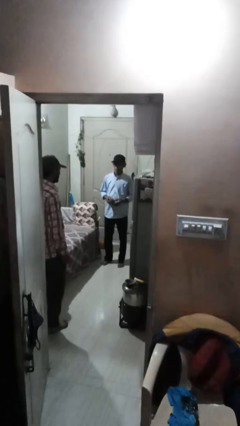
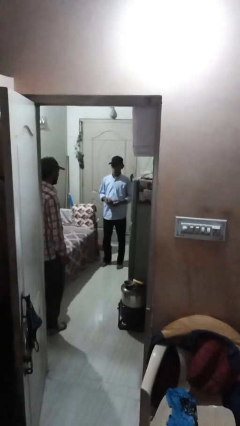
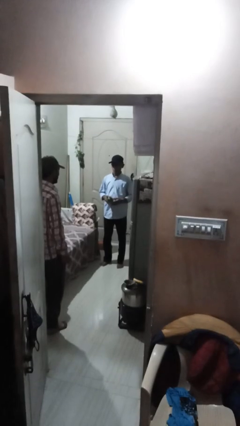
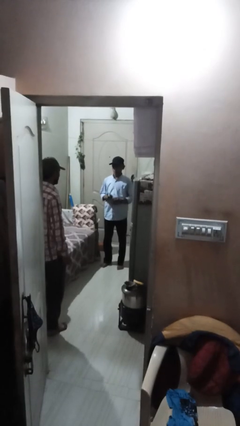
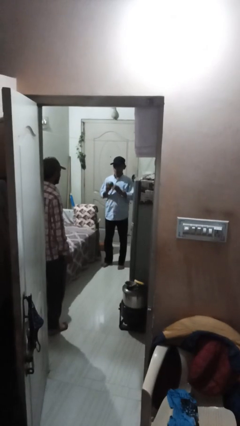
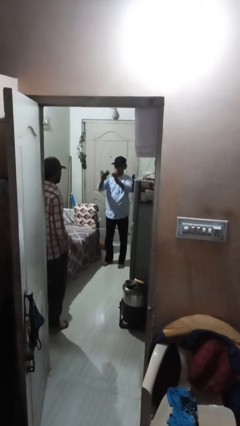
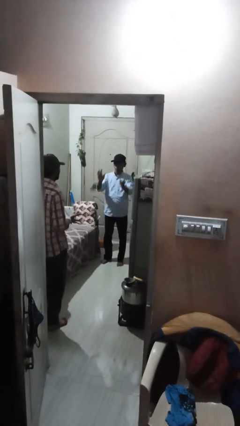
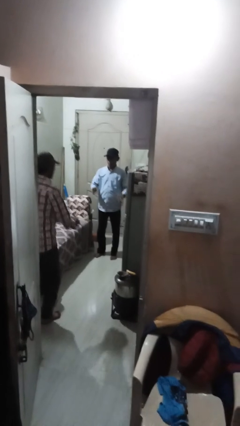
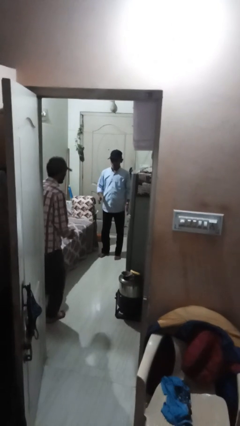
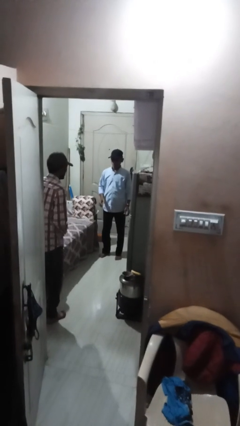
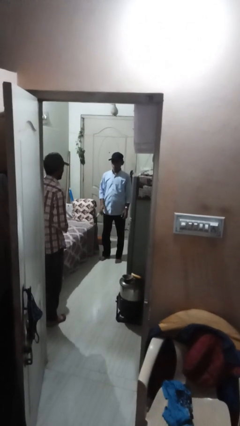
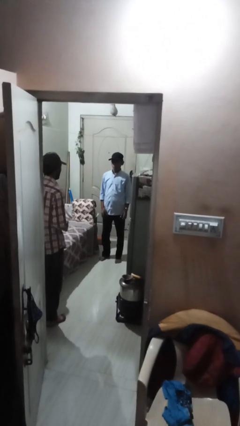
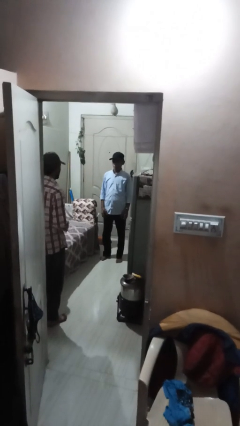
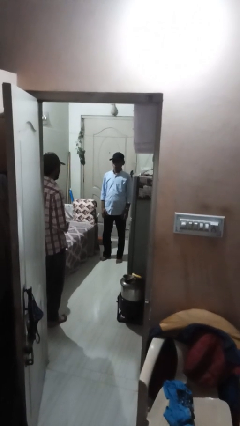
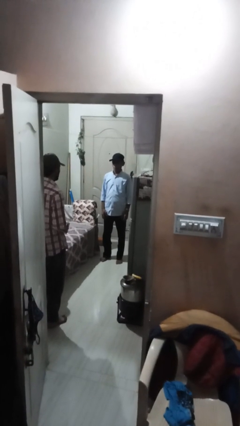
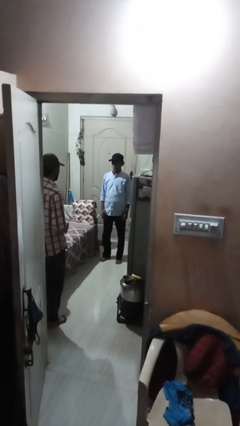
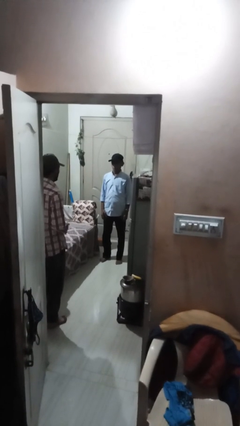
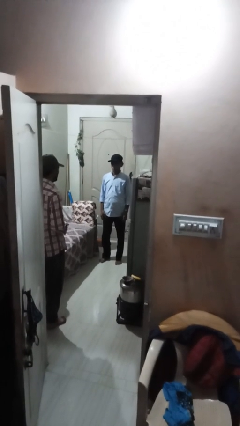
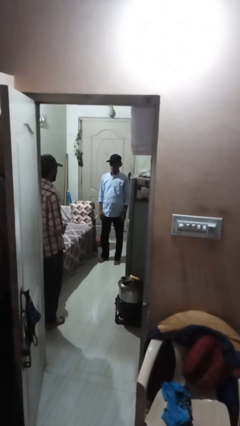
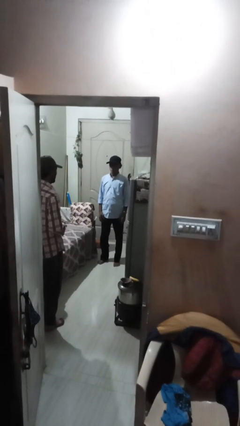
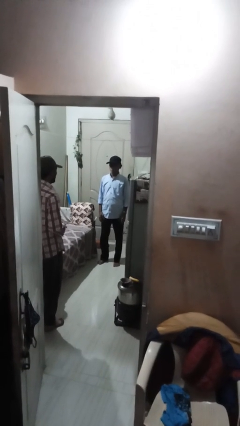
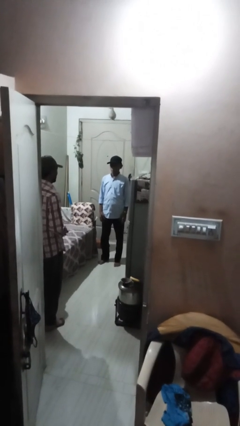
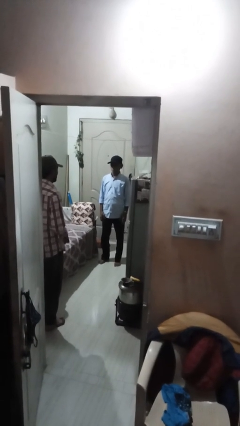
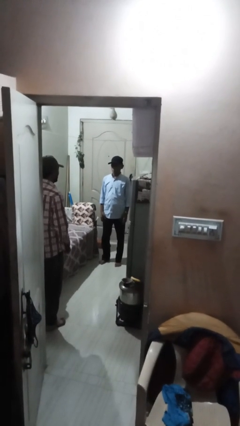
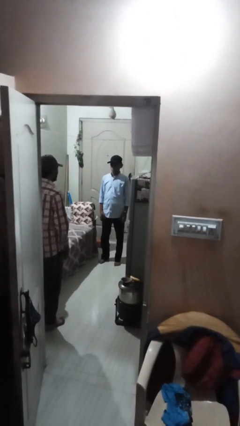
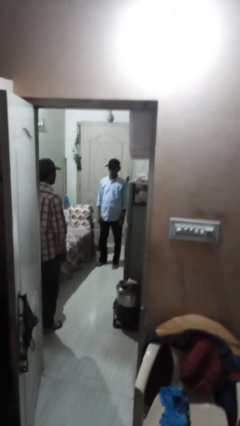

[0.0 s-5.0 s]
person throws object to person

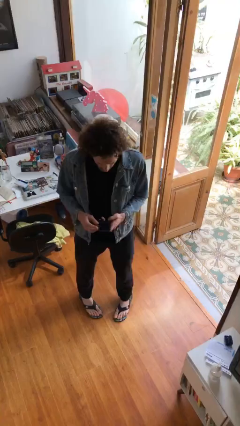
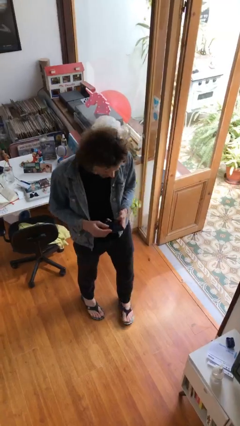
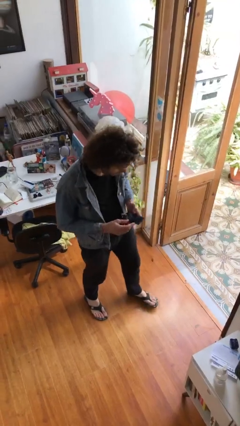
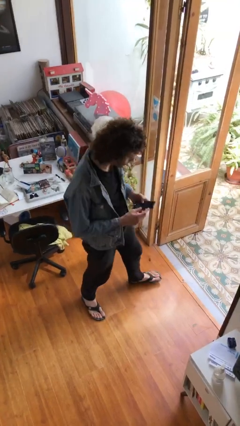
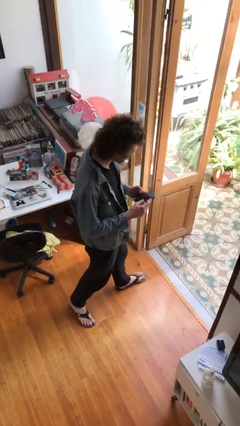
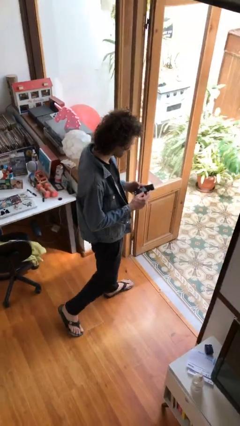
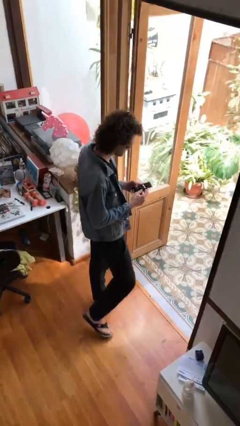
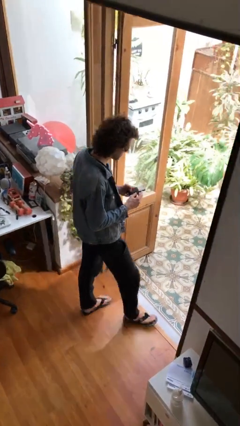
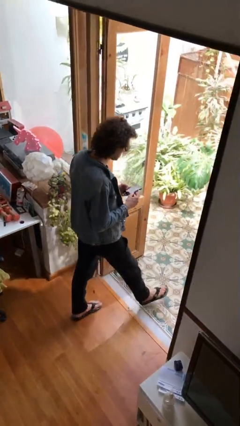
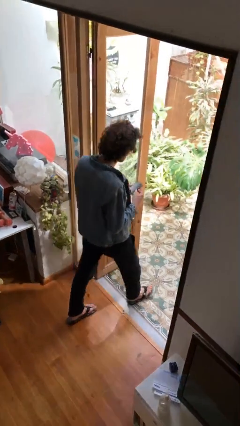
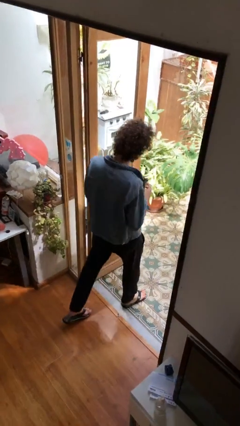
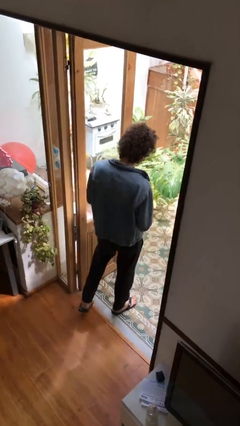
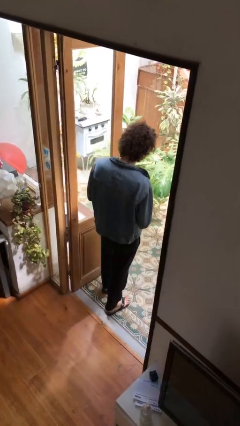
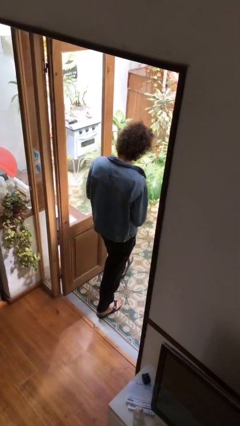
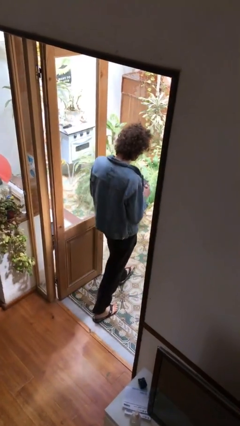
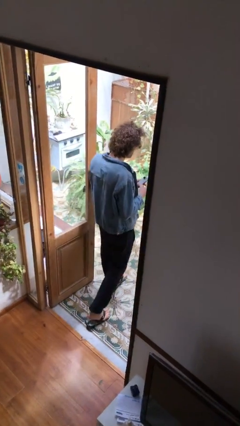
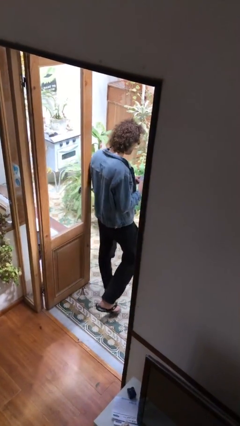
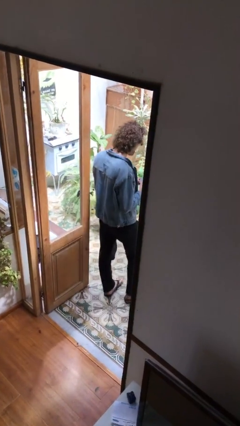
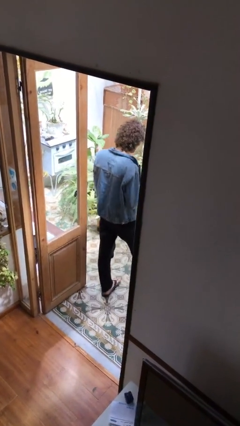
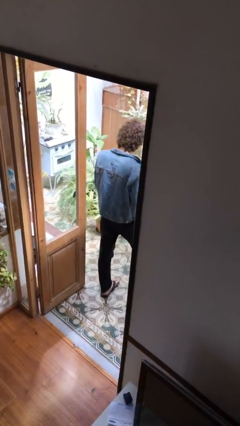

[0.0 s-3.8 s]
person exits scene through structure

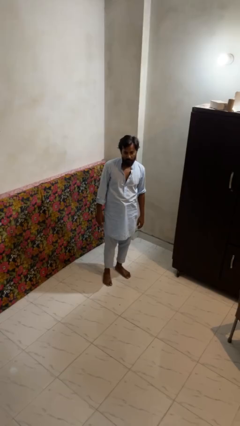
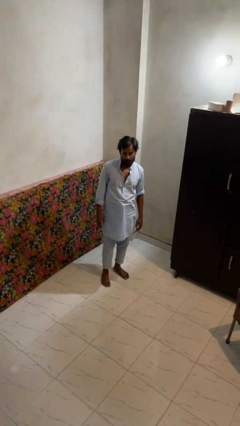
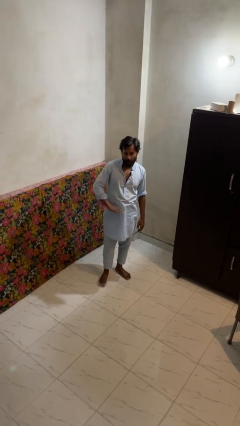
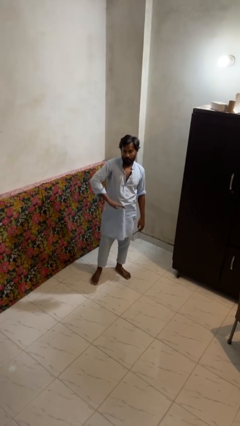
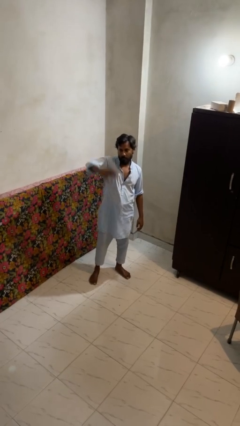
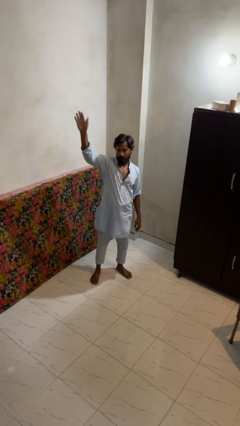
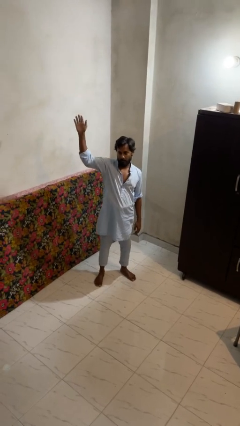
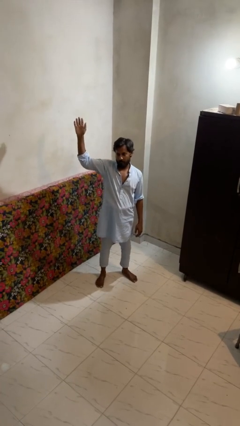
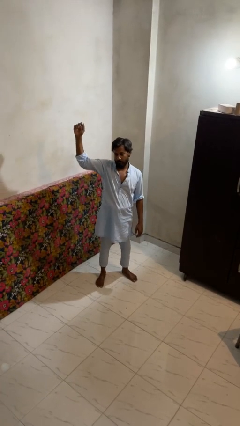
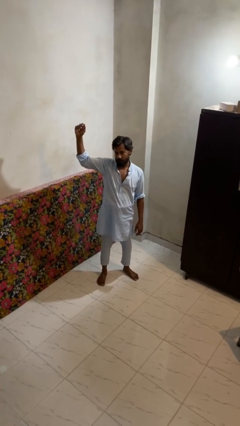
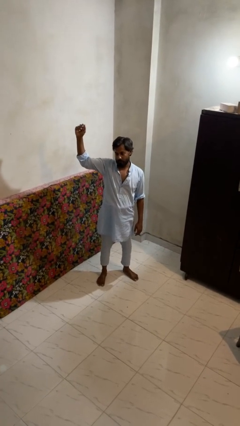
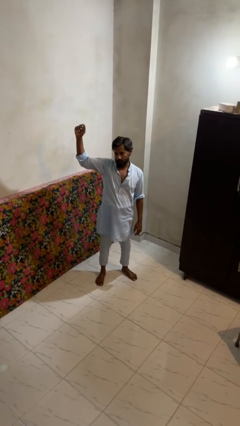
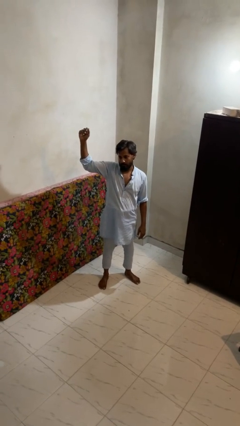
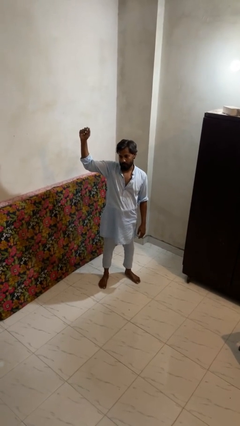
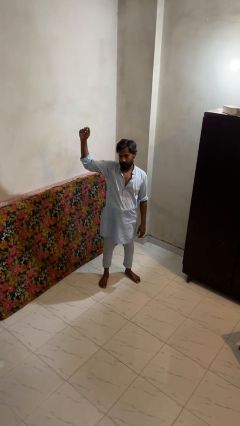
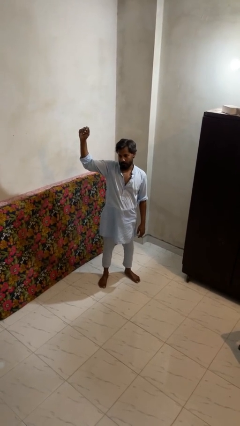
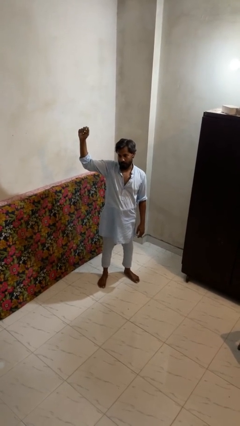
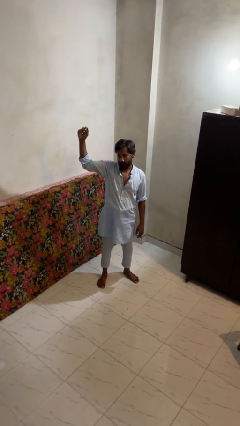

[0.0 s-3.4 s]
person gestures swipe up

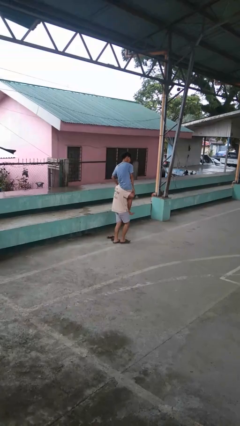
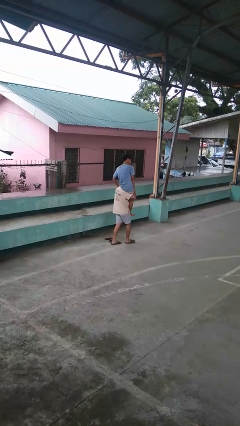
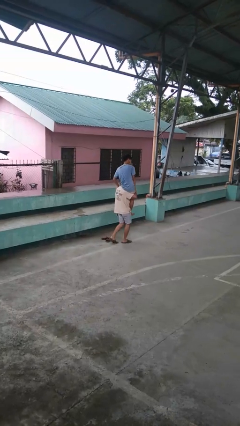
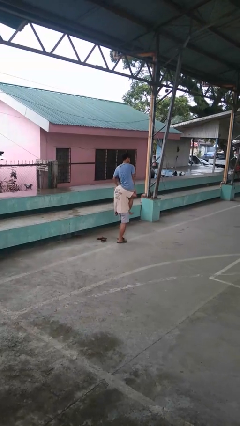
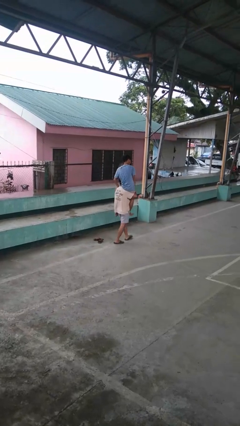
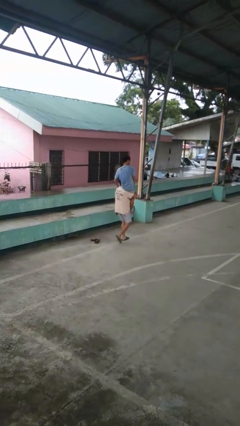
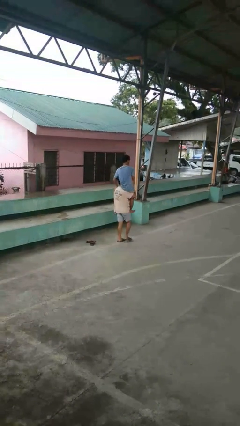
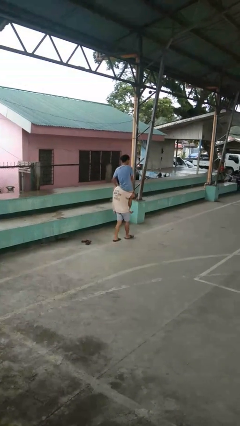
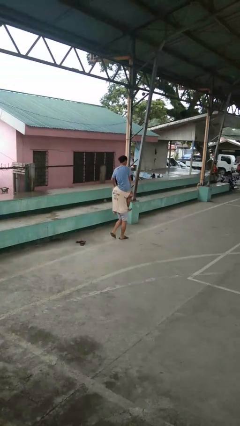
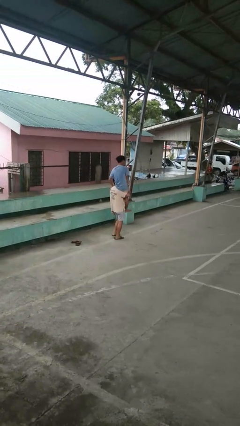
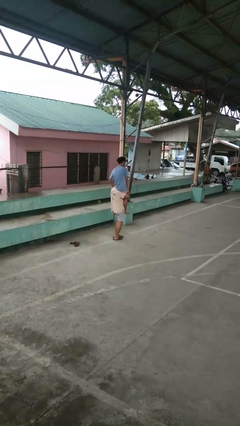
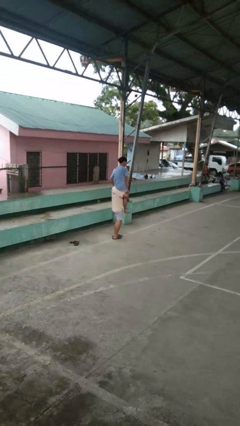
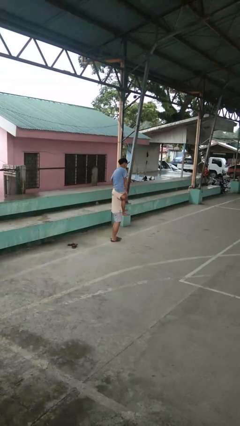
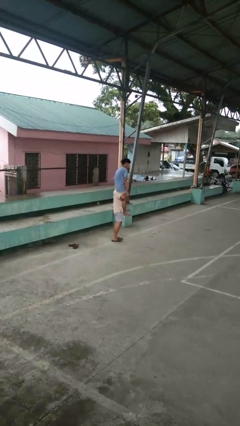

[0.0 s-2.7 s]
person carries person on shoulders

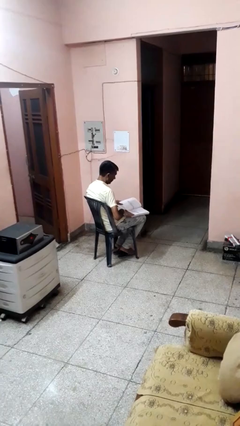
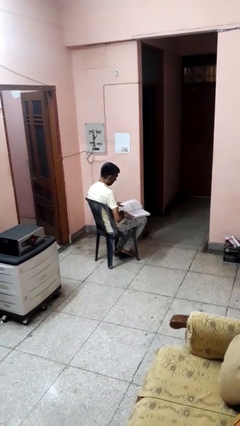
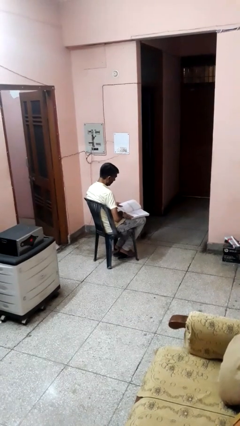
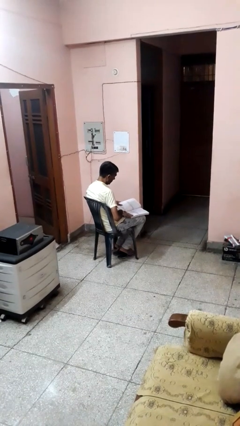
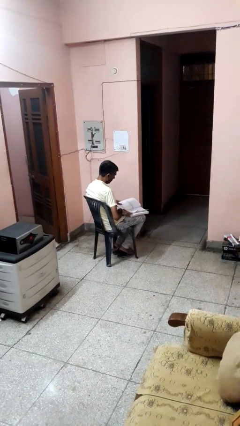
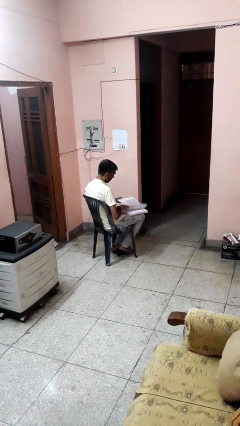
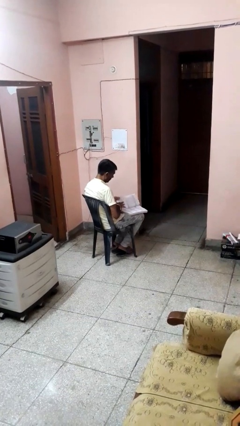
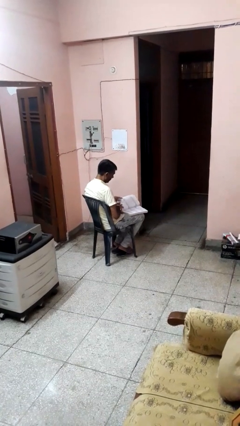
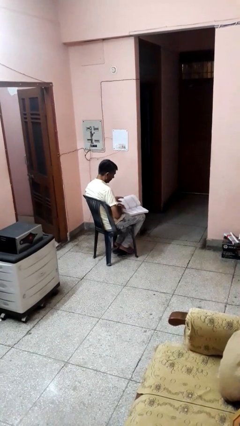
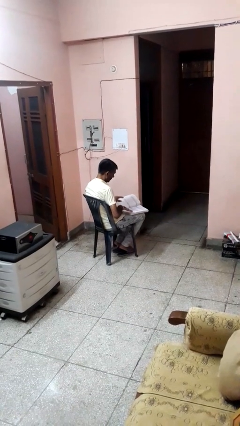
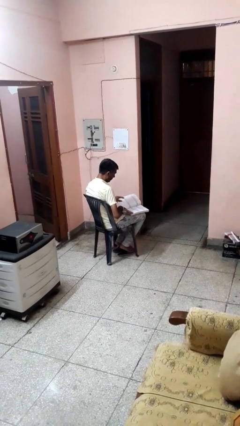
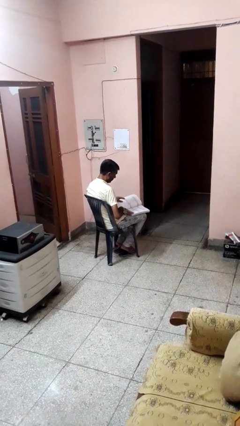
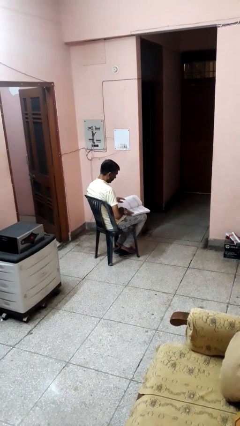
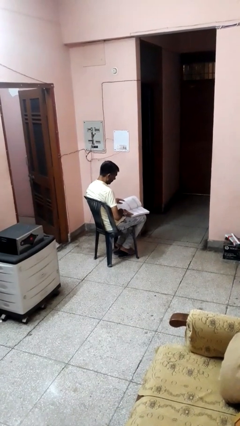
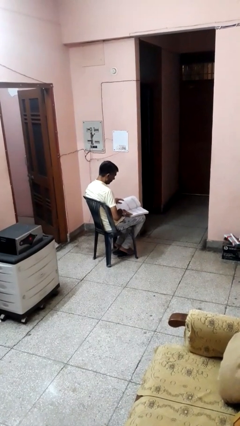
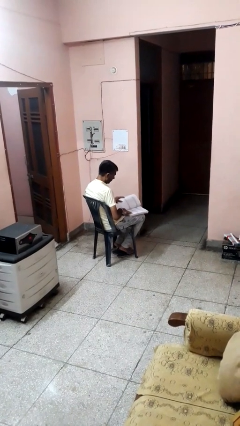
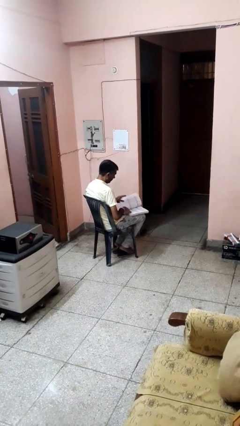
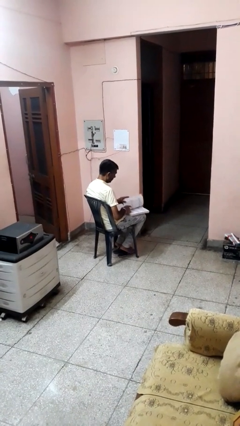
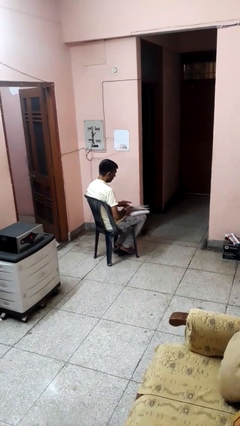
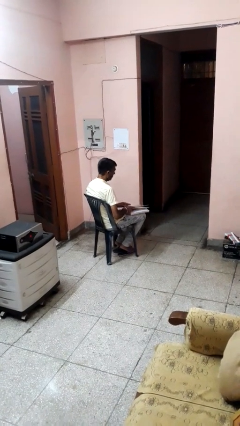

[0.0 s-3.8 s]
person reads book
